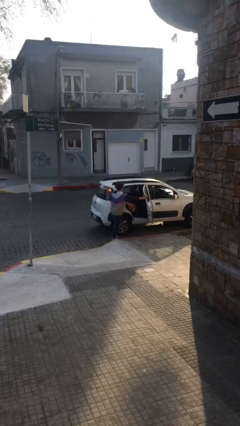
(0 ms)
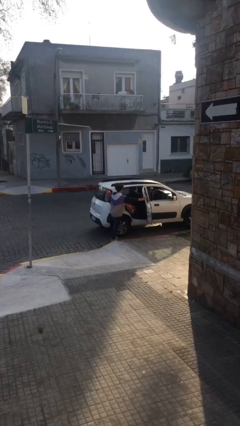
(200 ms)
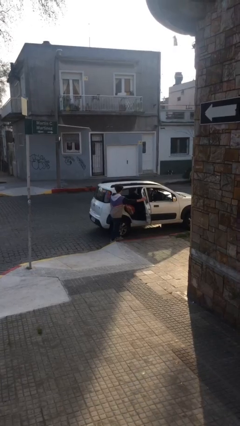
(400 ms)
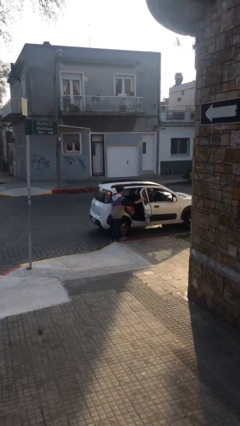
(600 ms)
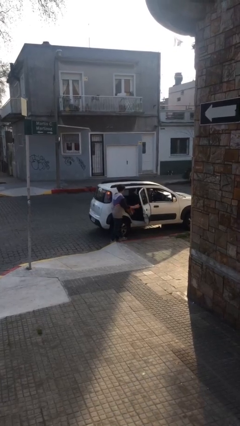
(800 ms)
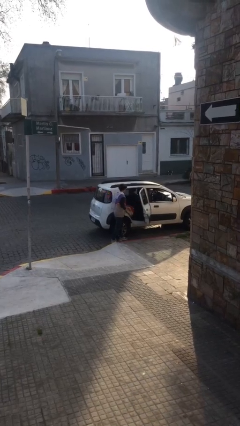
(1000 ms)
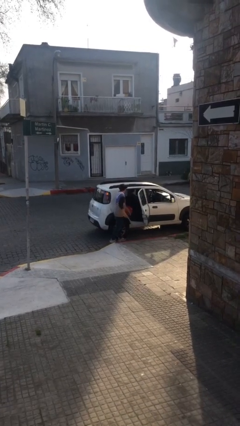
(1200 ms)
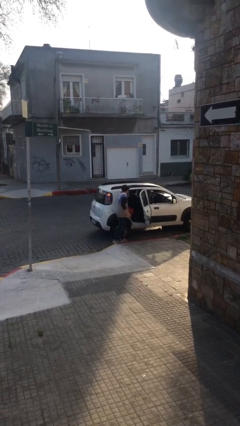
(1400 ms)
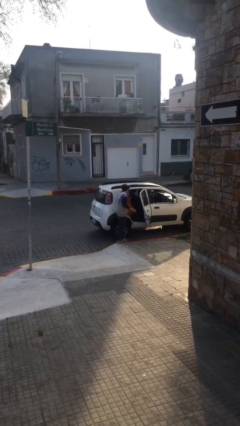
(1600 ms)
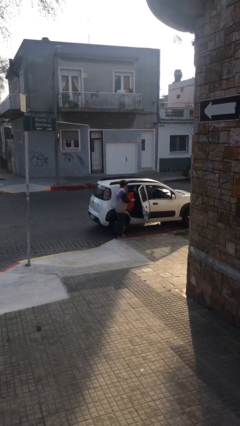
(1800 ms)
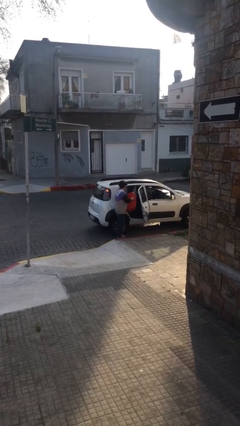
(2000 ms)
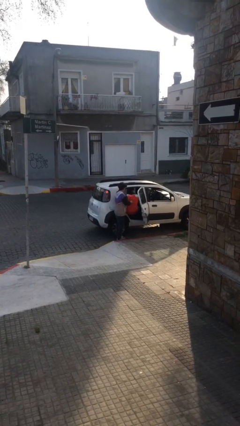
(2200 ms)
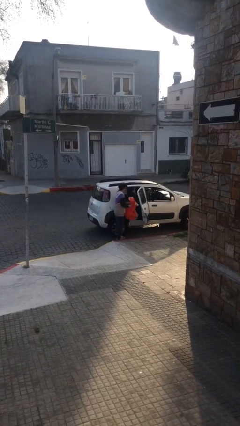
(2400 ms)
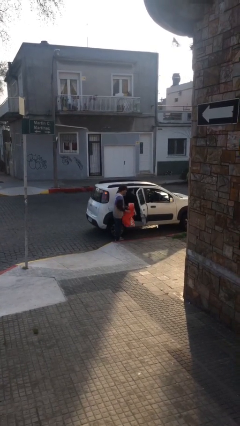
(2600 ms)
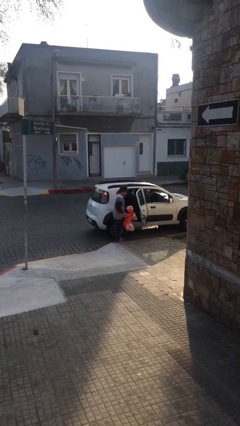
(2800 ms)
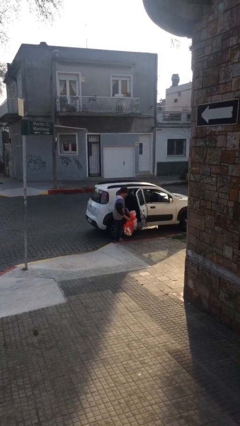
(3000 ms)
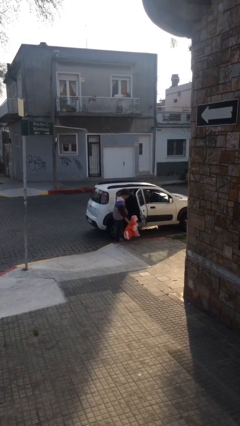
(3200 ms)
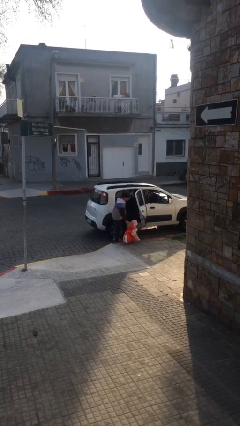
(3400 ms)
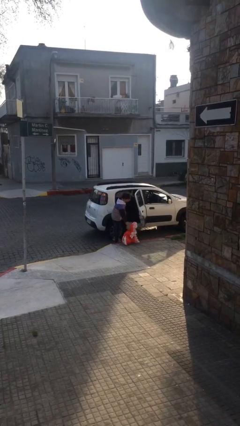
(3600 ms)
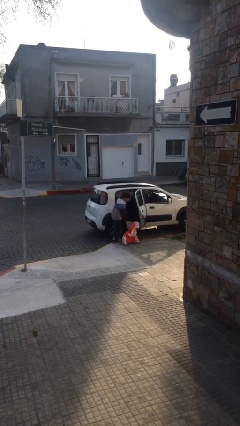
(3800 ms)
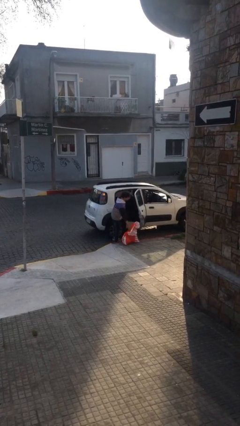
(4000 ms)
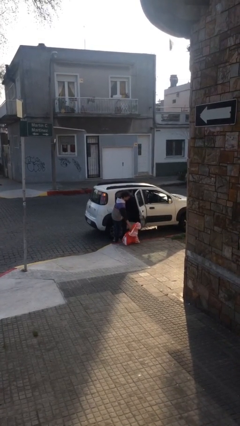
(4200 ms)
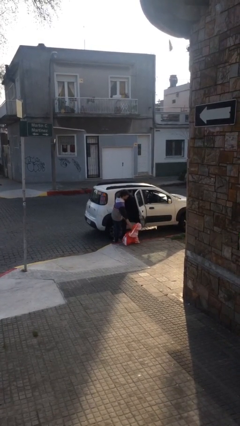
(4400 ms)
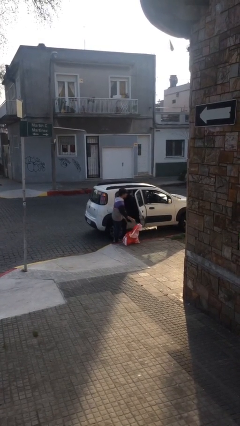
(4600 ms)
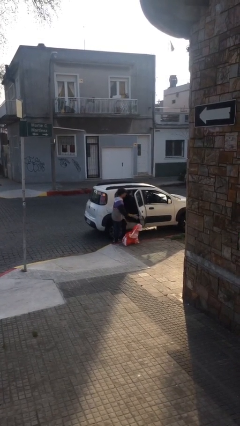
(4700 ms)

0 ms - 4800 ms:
person unloads car

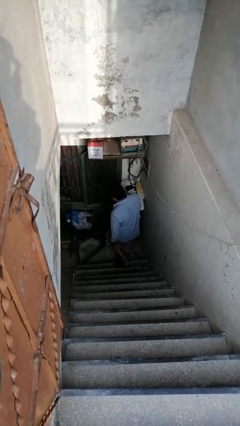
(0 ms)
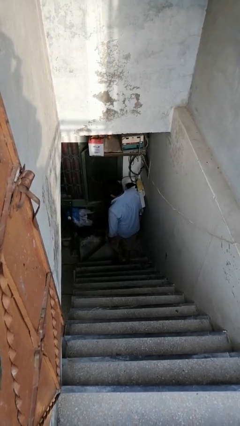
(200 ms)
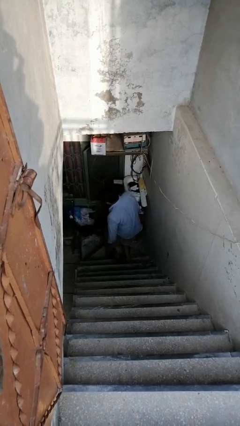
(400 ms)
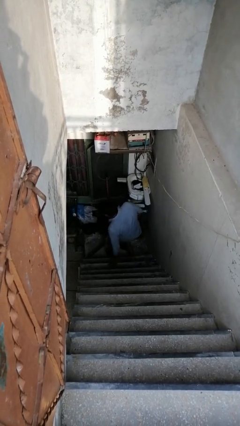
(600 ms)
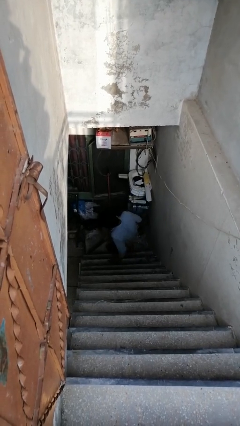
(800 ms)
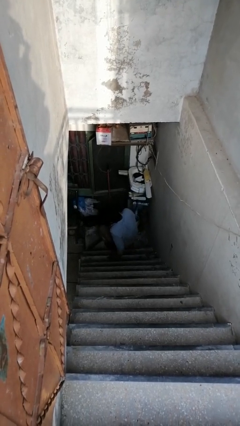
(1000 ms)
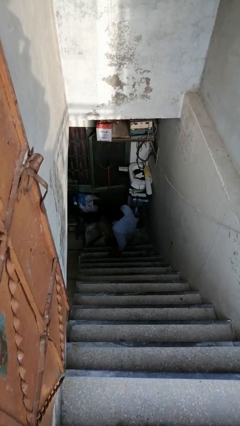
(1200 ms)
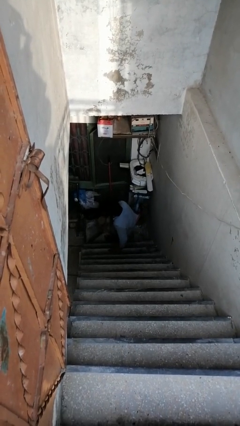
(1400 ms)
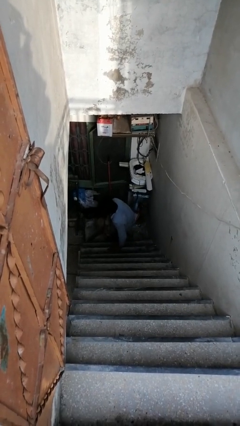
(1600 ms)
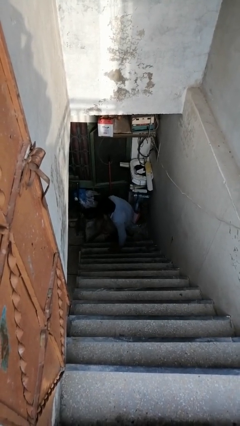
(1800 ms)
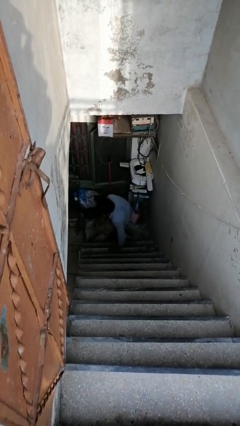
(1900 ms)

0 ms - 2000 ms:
person trips on stair

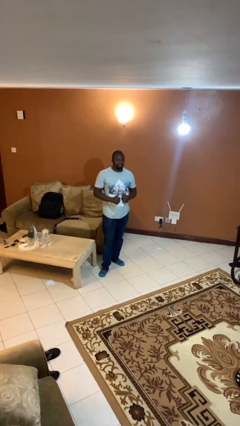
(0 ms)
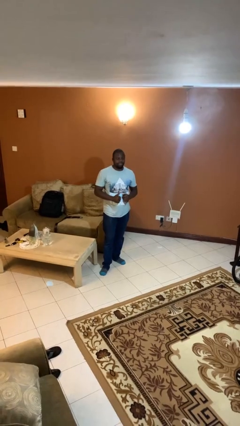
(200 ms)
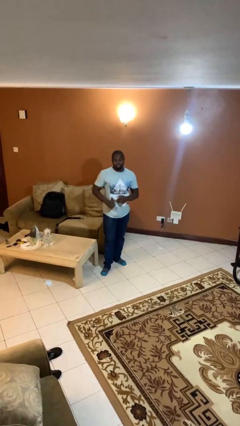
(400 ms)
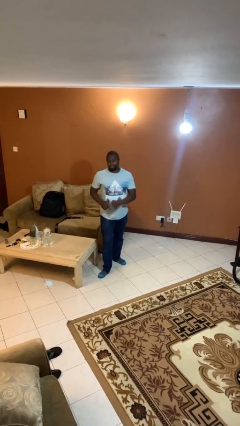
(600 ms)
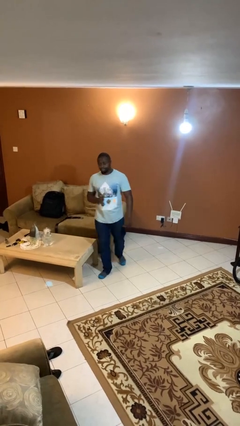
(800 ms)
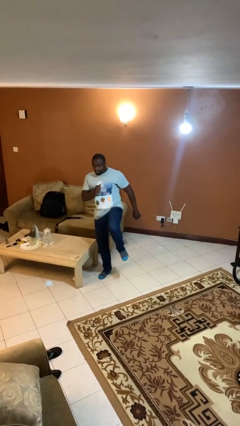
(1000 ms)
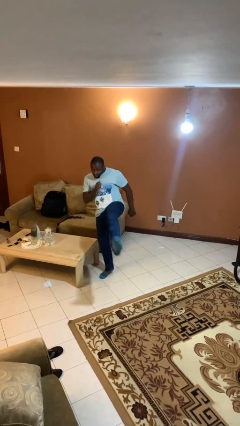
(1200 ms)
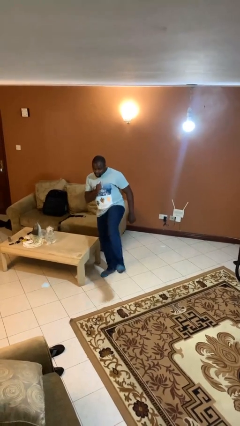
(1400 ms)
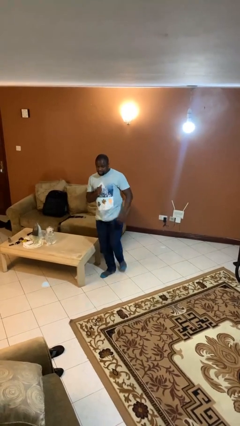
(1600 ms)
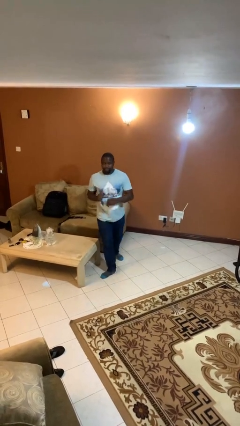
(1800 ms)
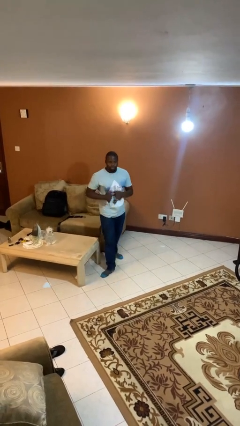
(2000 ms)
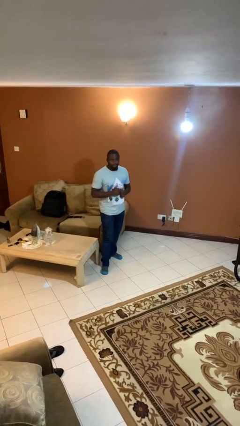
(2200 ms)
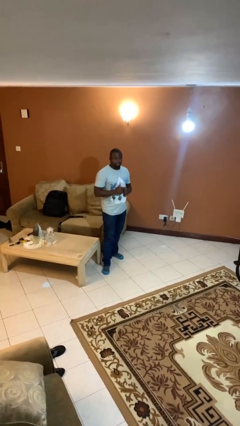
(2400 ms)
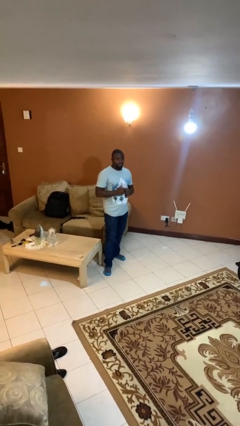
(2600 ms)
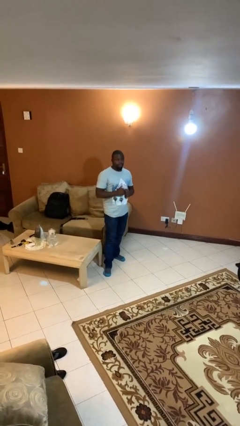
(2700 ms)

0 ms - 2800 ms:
person karate kicks

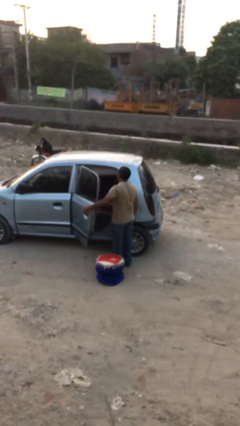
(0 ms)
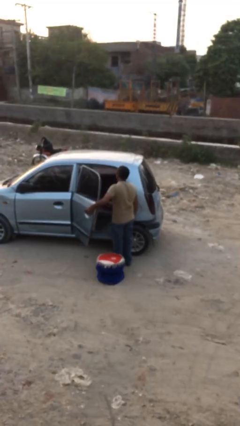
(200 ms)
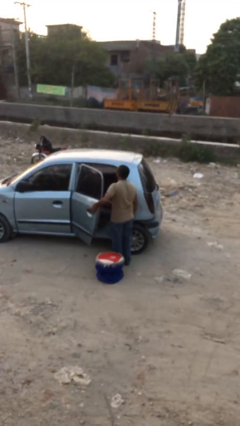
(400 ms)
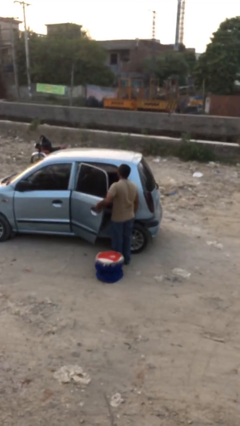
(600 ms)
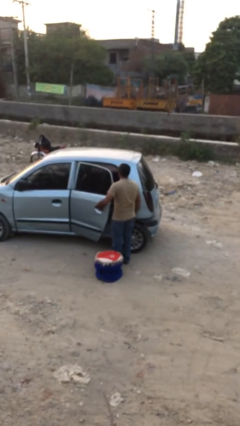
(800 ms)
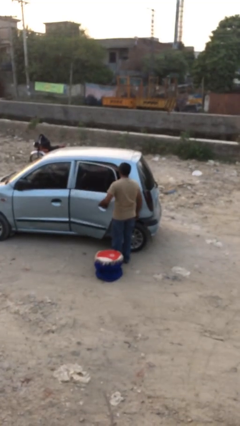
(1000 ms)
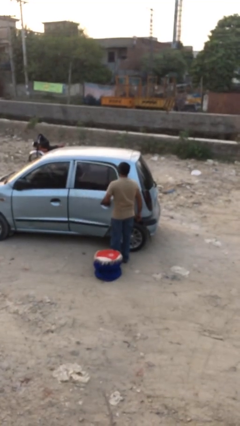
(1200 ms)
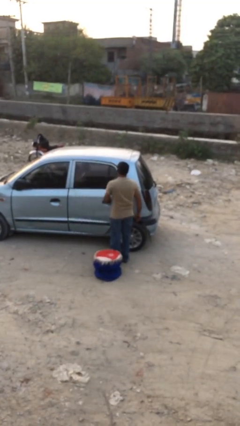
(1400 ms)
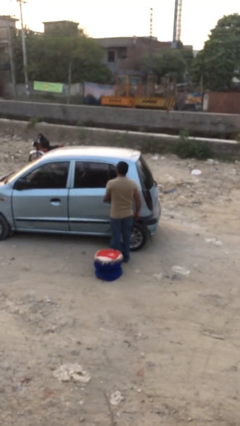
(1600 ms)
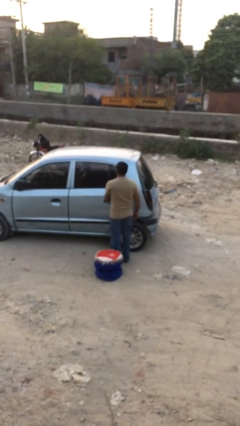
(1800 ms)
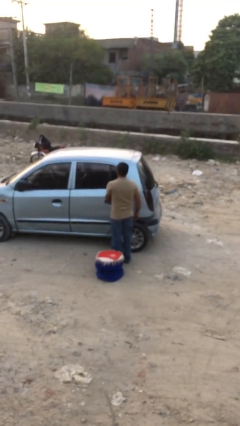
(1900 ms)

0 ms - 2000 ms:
person closes car door

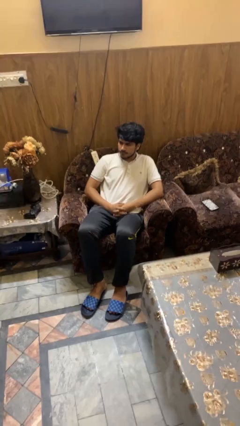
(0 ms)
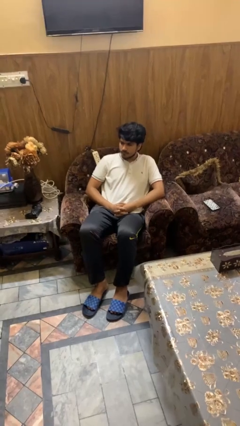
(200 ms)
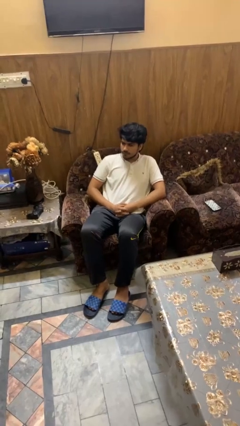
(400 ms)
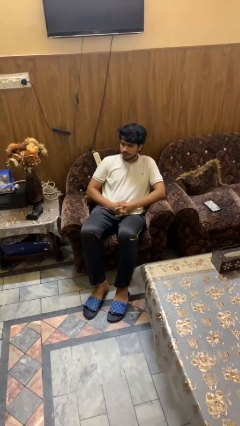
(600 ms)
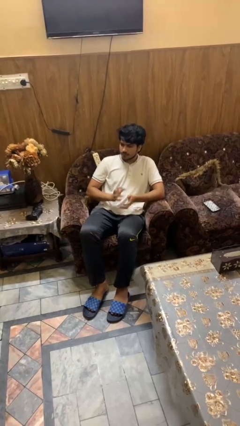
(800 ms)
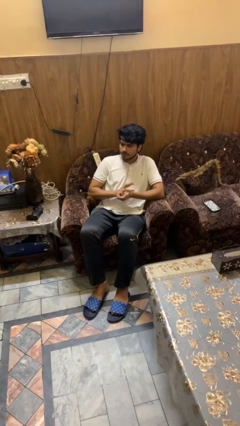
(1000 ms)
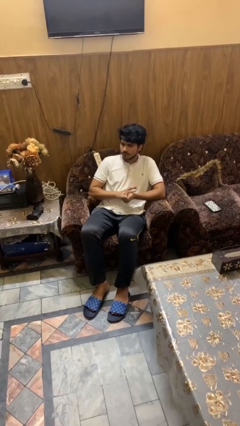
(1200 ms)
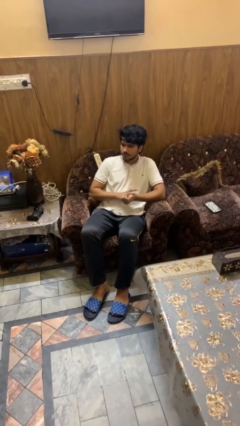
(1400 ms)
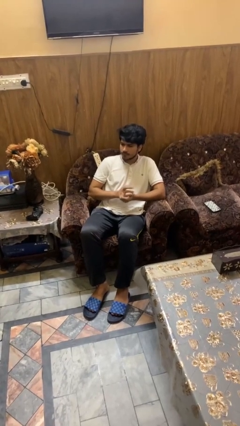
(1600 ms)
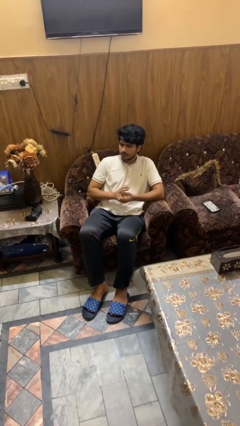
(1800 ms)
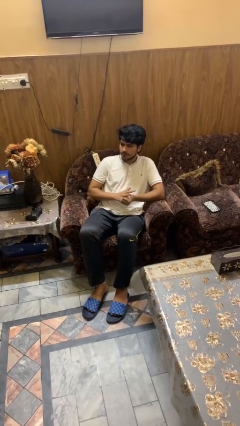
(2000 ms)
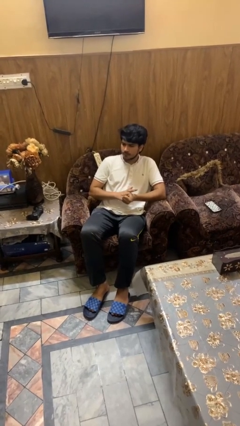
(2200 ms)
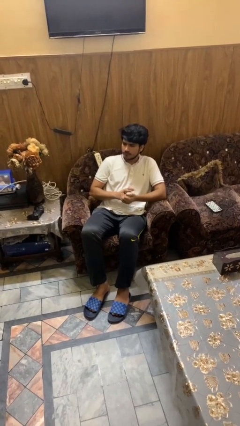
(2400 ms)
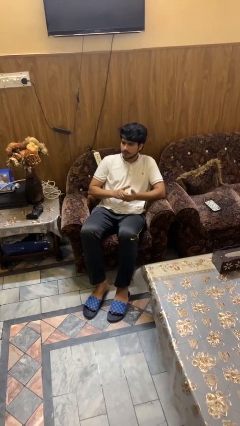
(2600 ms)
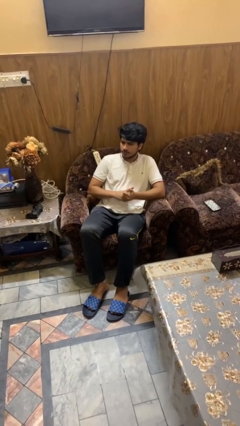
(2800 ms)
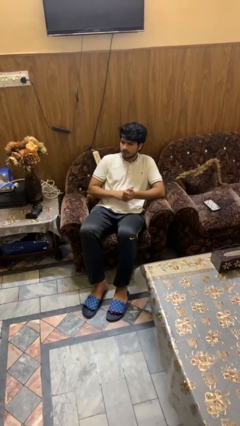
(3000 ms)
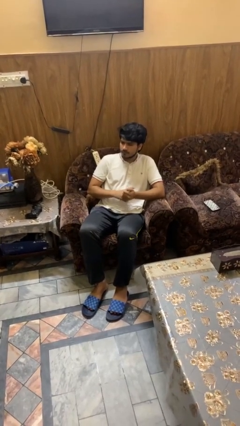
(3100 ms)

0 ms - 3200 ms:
person cracks knuckles

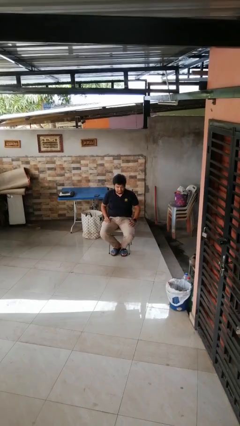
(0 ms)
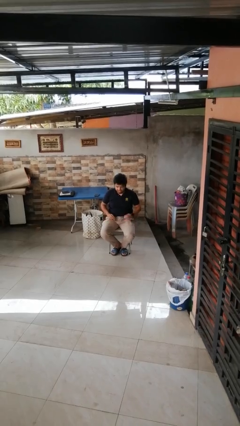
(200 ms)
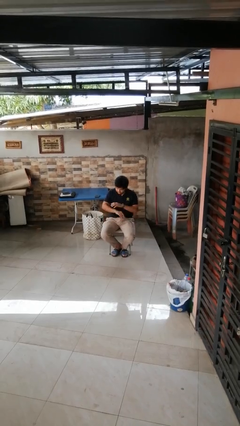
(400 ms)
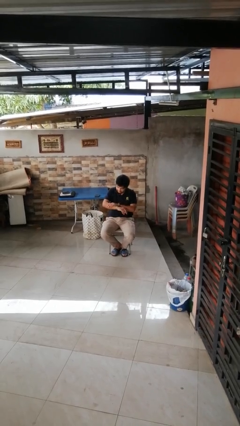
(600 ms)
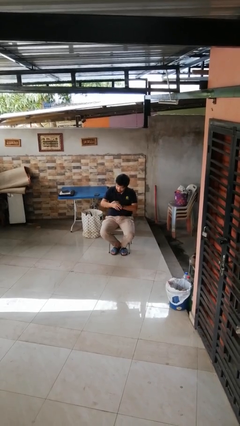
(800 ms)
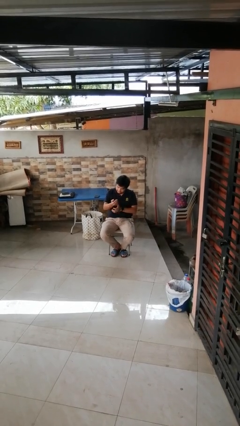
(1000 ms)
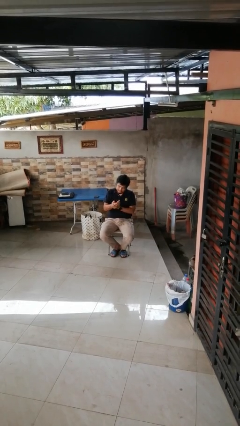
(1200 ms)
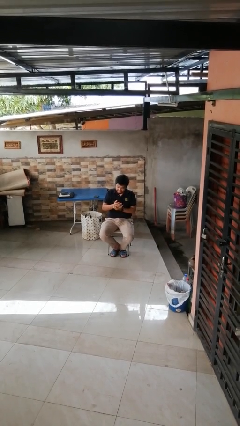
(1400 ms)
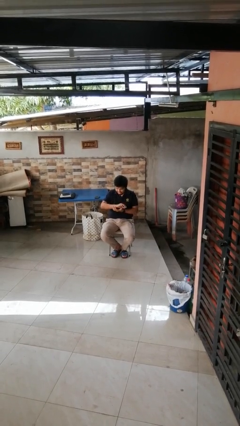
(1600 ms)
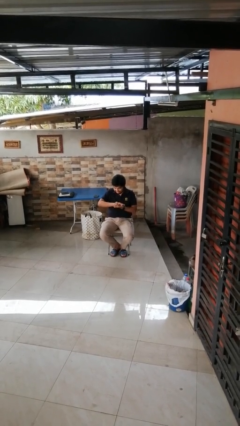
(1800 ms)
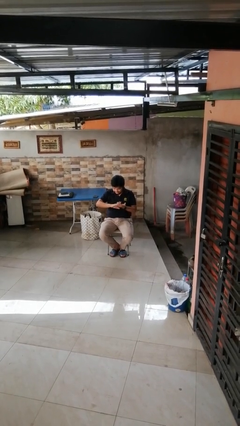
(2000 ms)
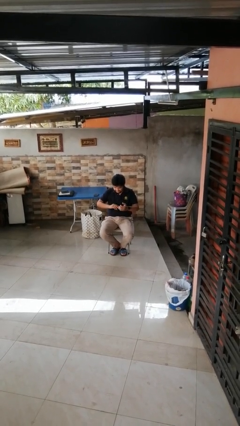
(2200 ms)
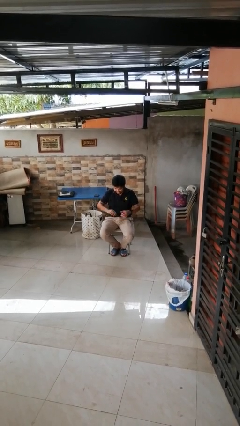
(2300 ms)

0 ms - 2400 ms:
person looks at hands in lap

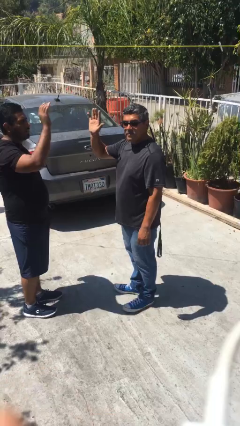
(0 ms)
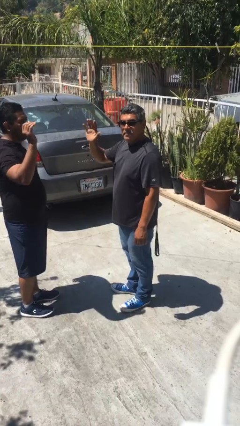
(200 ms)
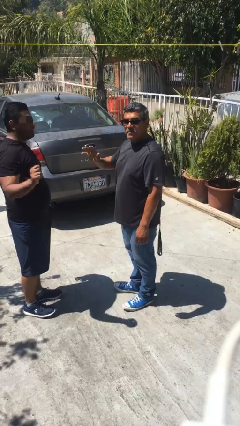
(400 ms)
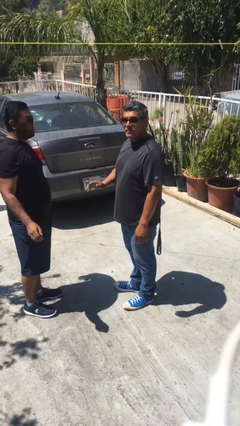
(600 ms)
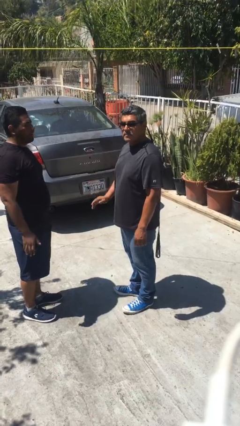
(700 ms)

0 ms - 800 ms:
person highfives hand
